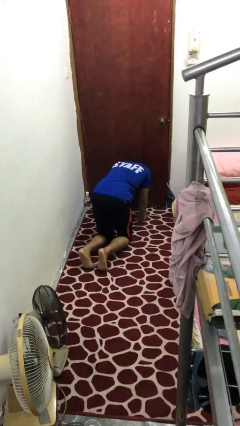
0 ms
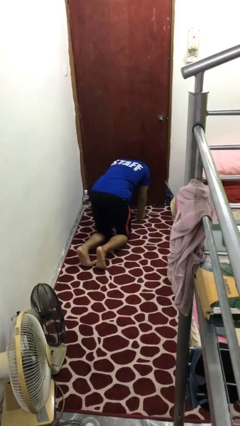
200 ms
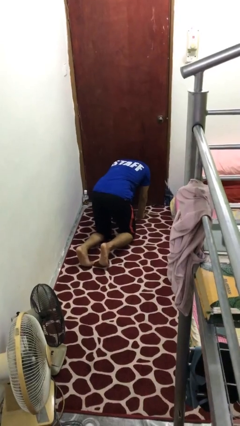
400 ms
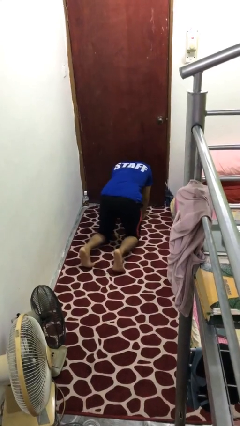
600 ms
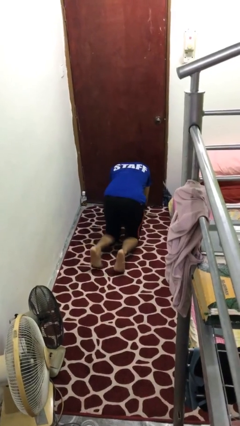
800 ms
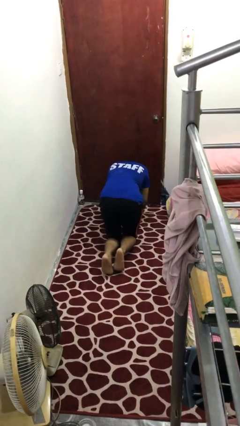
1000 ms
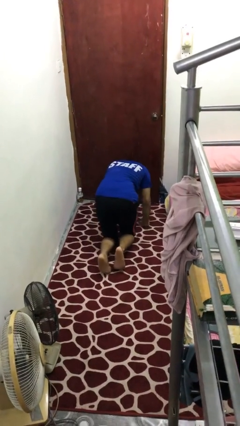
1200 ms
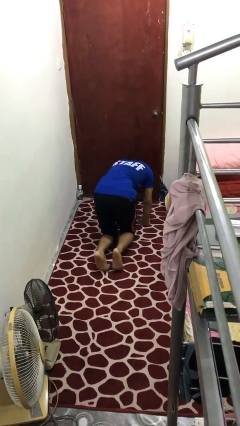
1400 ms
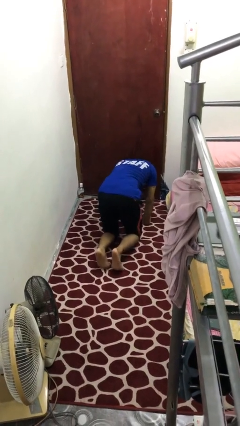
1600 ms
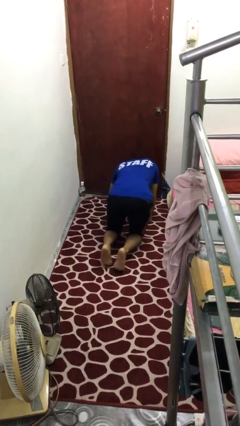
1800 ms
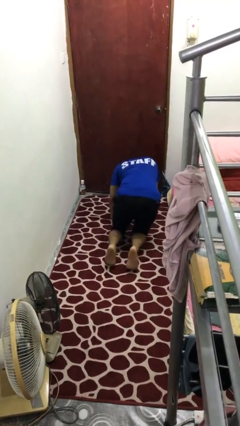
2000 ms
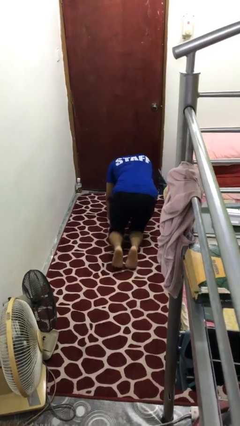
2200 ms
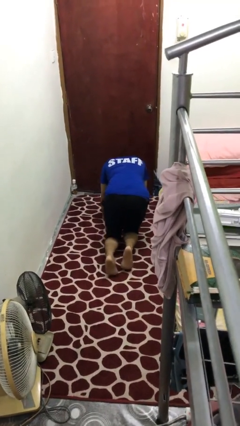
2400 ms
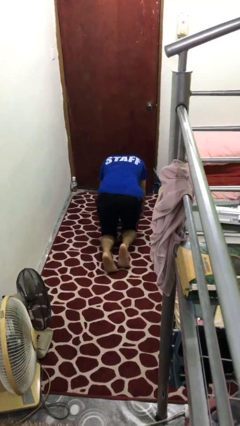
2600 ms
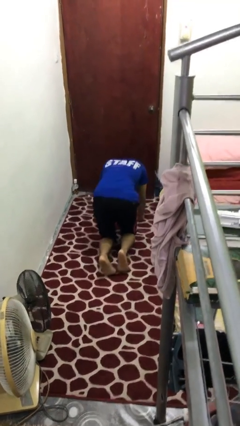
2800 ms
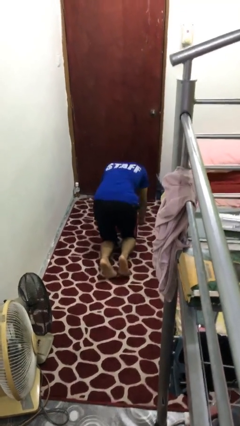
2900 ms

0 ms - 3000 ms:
person crawls

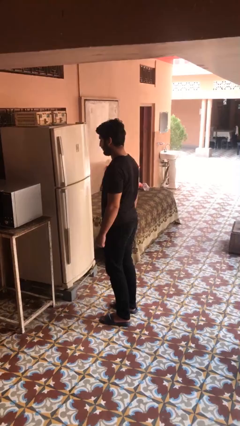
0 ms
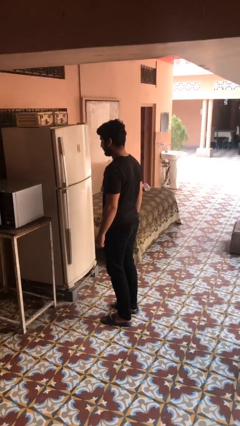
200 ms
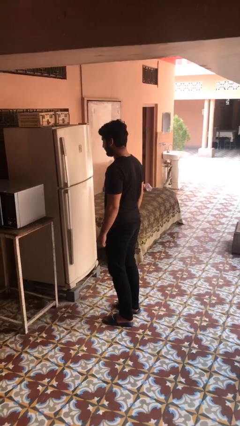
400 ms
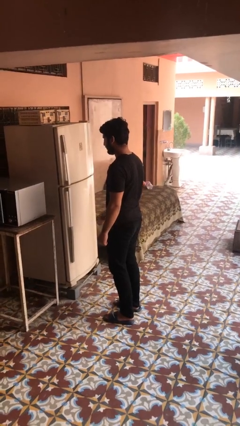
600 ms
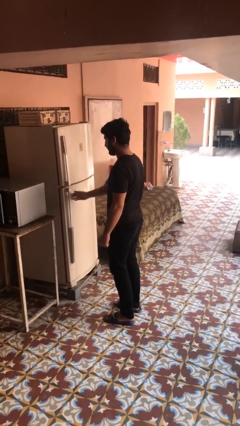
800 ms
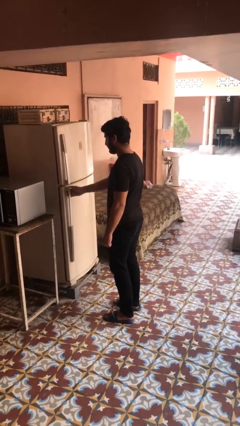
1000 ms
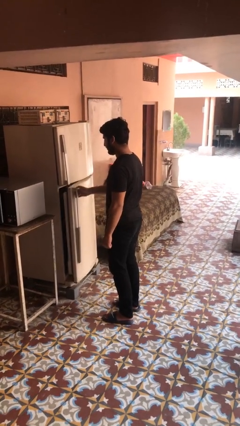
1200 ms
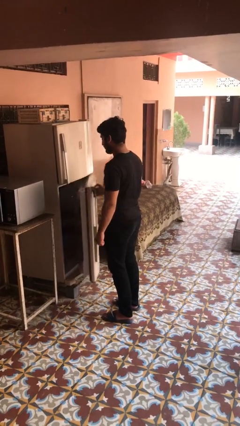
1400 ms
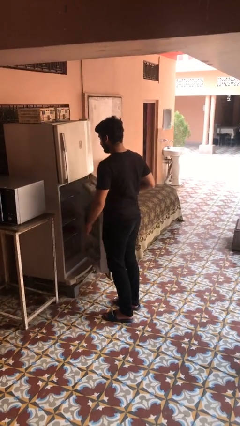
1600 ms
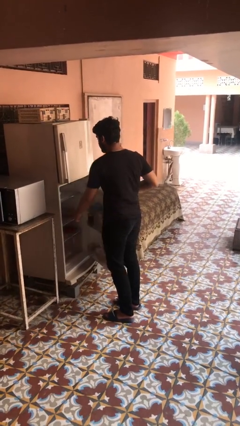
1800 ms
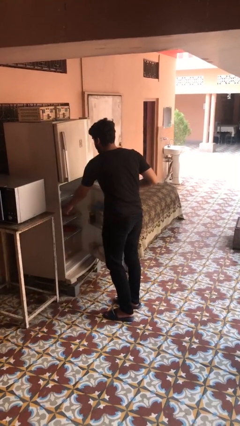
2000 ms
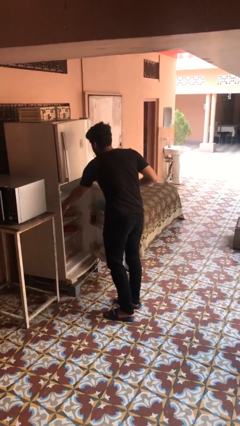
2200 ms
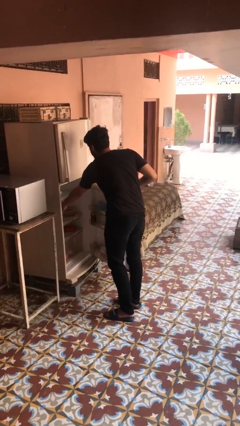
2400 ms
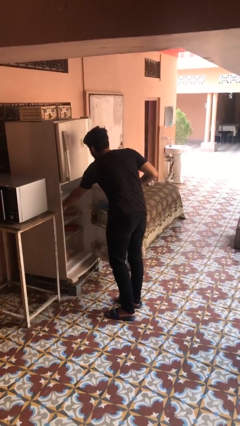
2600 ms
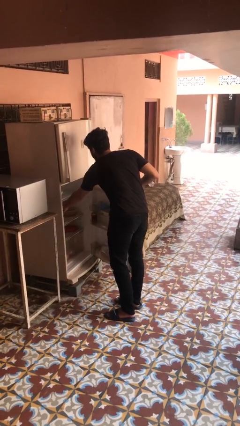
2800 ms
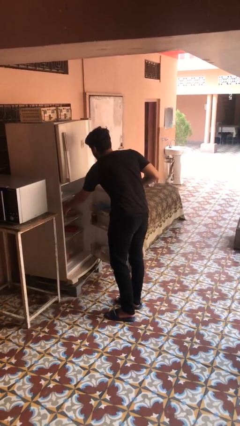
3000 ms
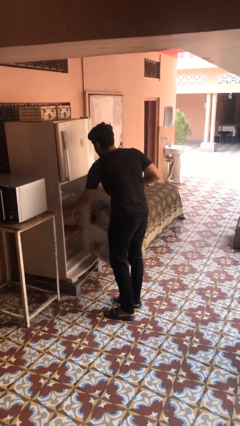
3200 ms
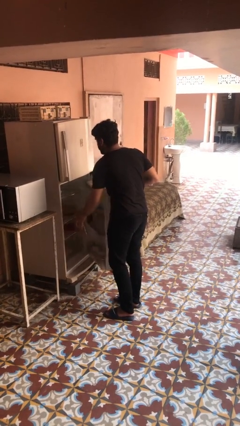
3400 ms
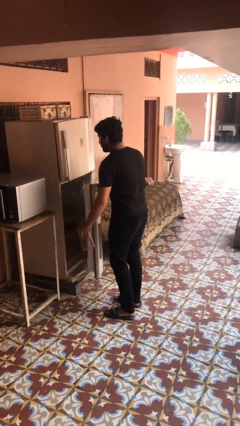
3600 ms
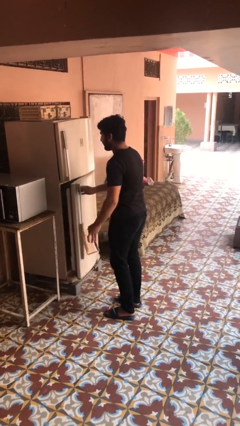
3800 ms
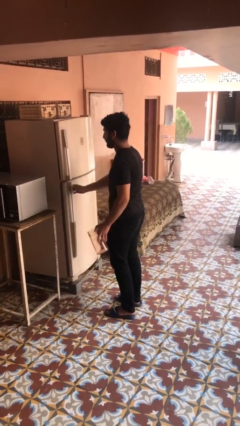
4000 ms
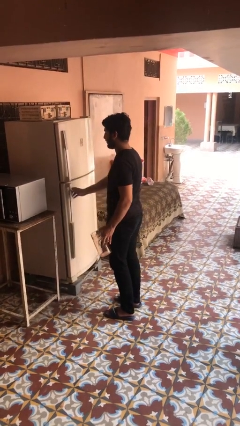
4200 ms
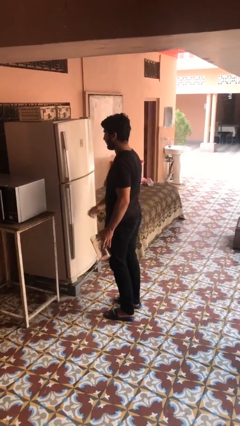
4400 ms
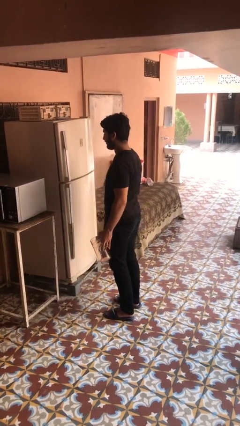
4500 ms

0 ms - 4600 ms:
person takes object from refrigerator

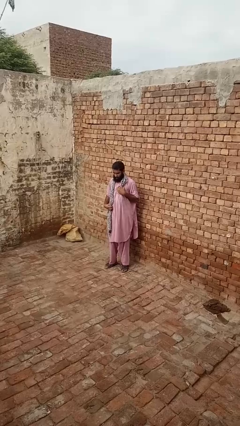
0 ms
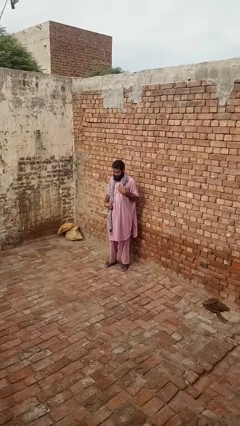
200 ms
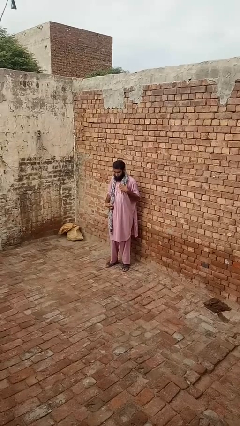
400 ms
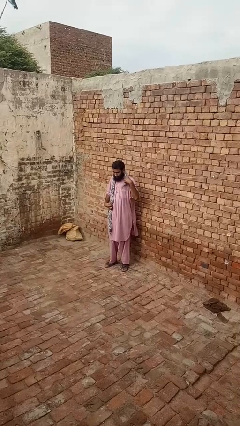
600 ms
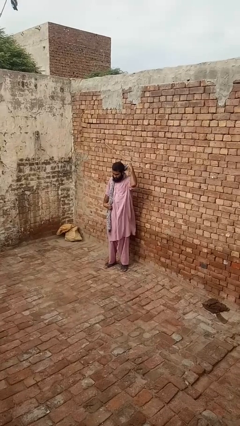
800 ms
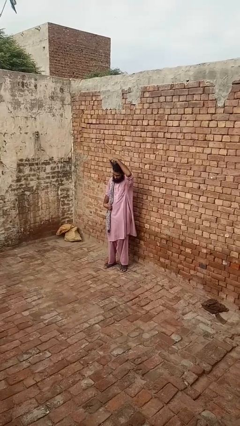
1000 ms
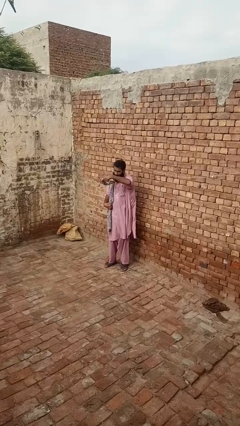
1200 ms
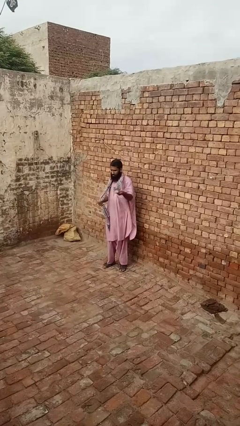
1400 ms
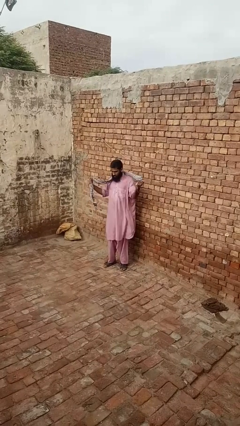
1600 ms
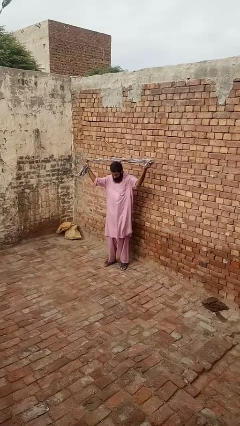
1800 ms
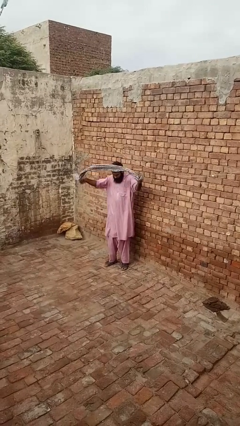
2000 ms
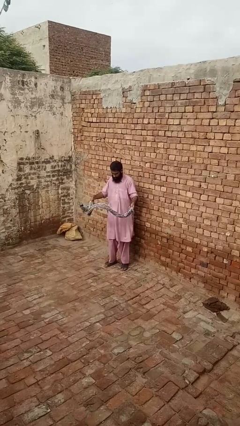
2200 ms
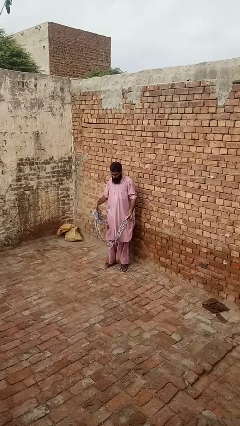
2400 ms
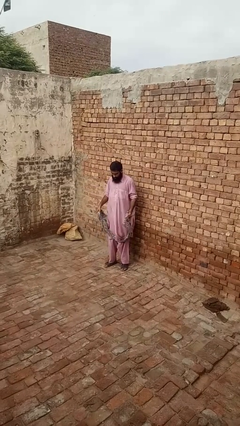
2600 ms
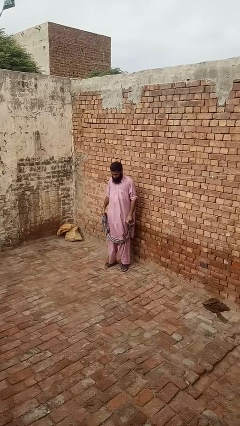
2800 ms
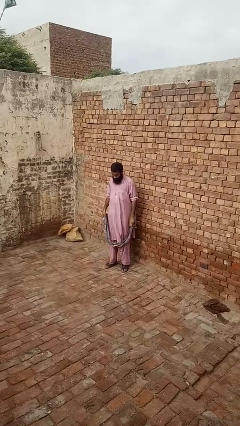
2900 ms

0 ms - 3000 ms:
person takes off scarf

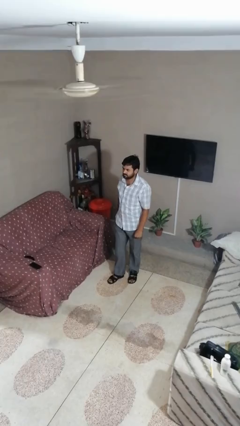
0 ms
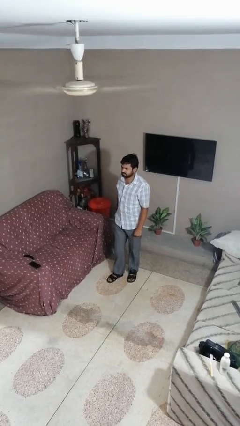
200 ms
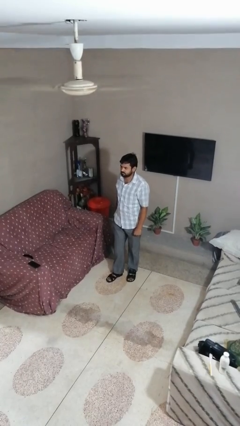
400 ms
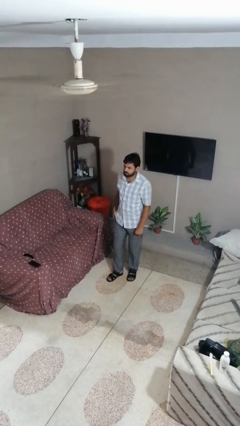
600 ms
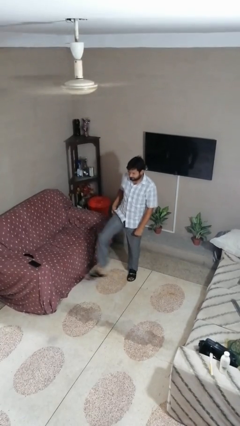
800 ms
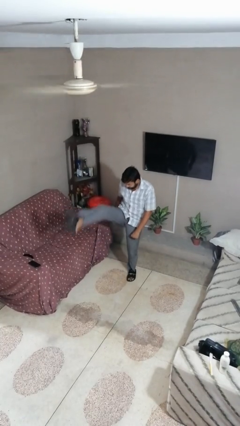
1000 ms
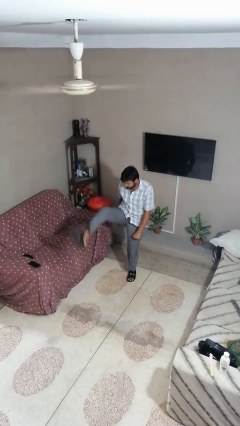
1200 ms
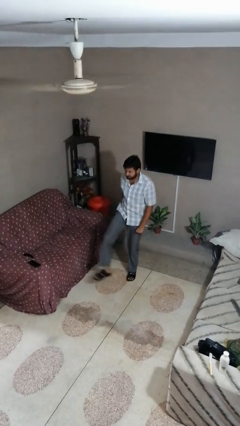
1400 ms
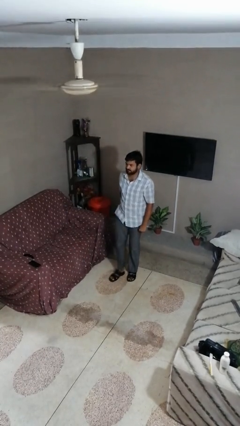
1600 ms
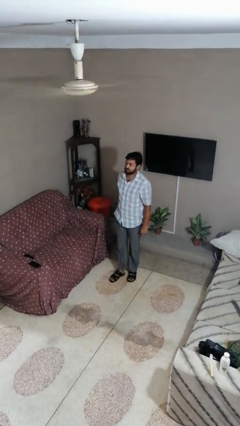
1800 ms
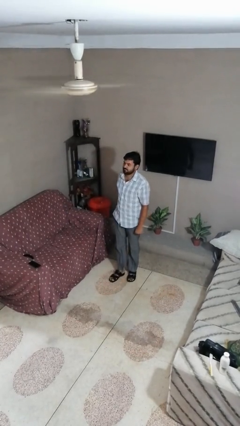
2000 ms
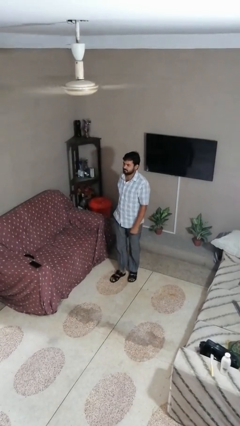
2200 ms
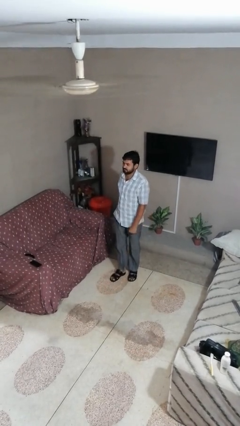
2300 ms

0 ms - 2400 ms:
person karate kicks

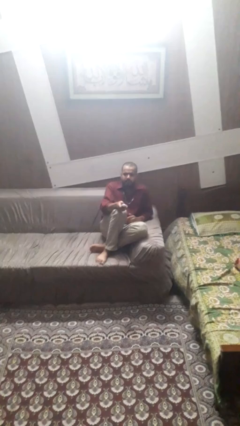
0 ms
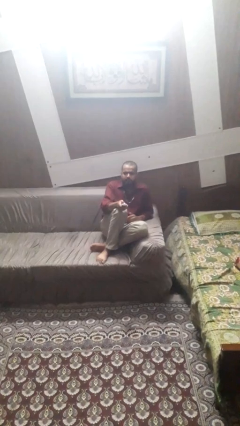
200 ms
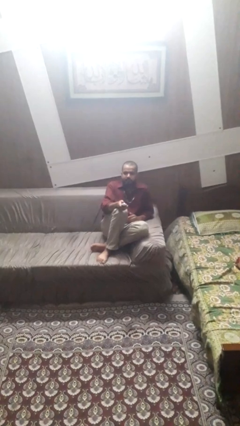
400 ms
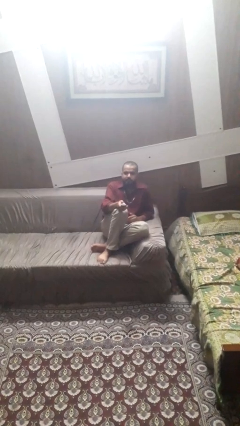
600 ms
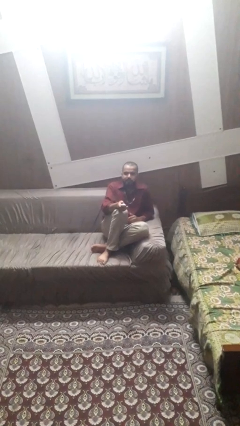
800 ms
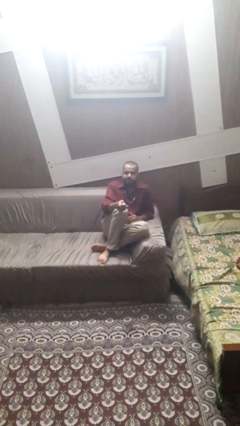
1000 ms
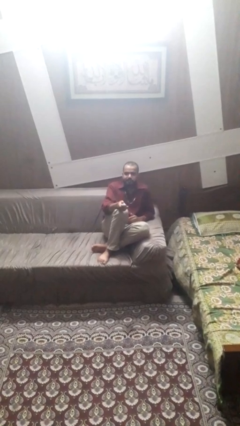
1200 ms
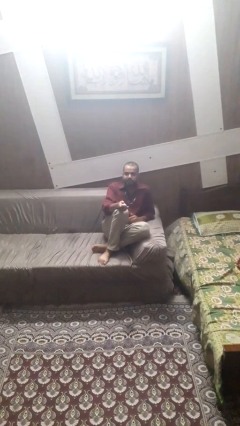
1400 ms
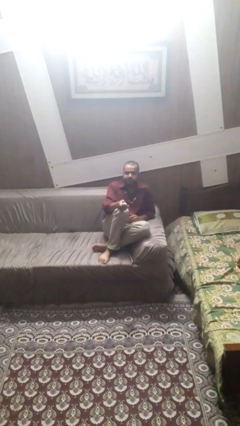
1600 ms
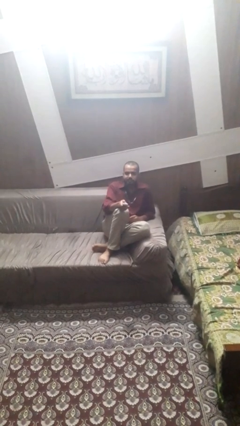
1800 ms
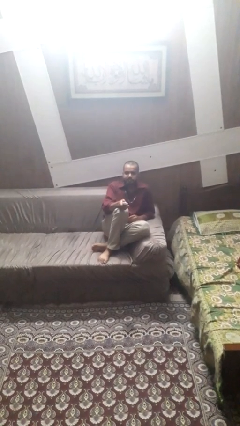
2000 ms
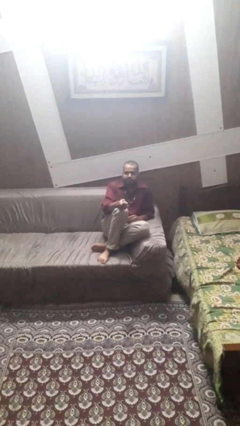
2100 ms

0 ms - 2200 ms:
person uses television remote

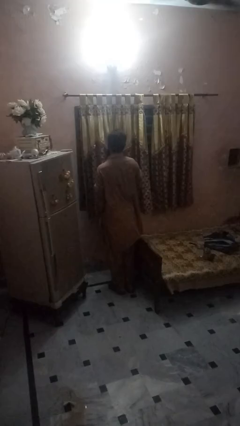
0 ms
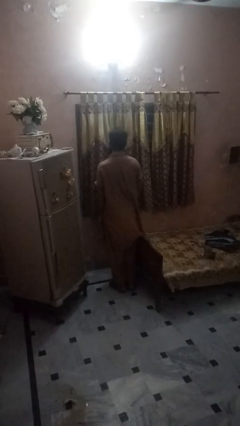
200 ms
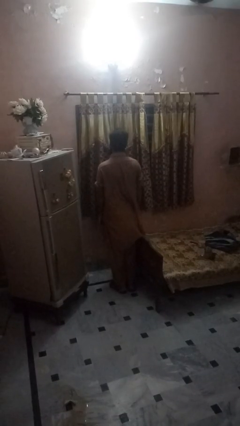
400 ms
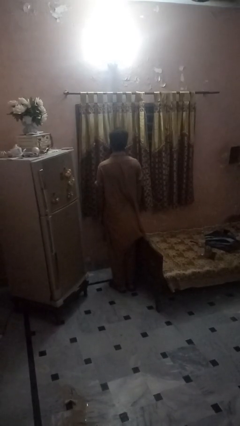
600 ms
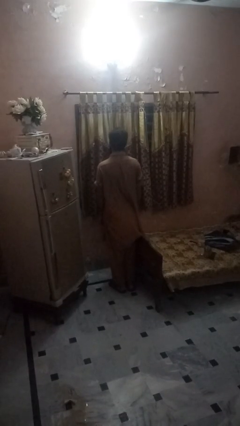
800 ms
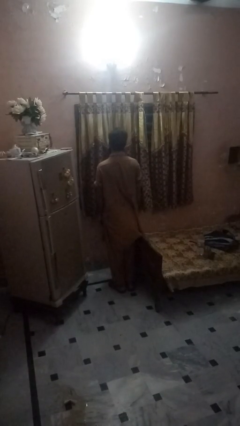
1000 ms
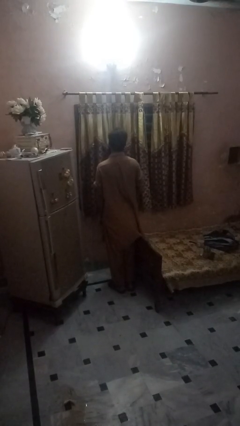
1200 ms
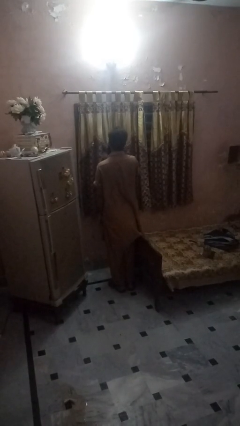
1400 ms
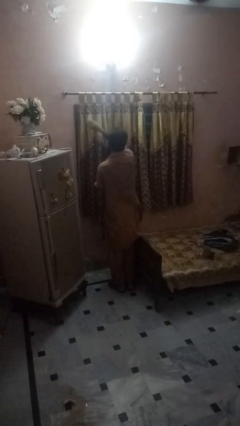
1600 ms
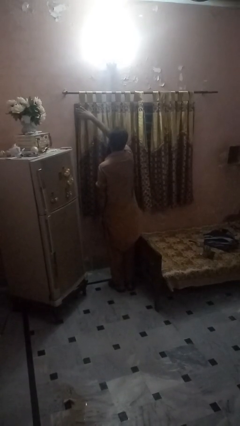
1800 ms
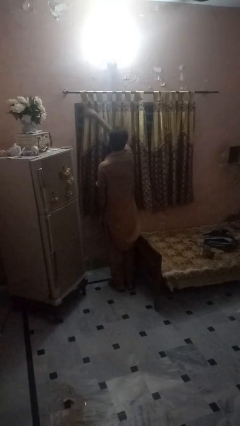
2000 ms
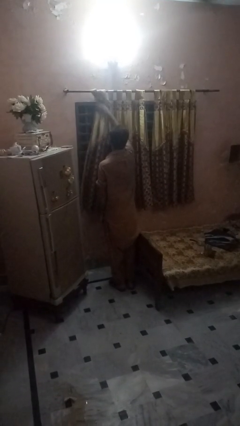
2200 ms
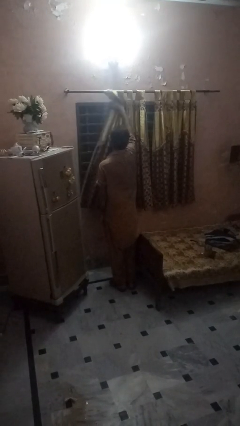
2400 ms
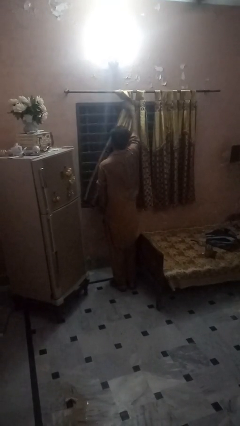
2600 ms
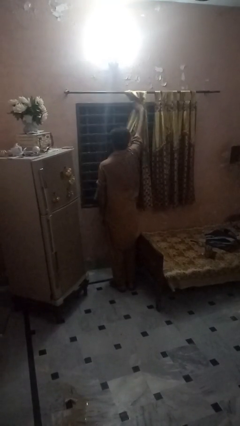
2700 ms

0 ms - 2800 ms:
person opens curtains
